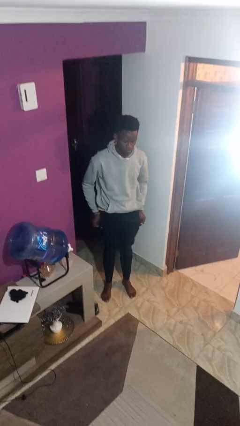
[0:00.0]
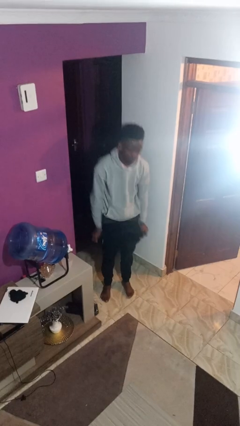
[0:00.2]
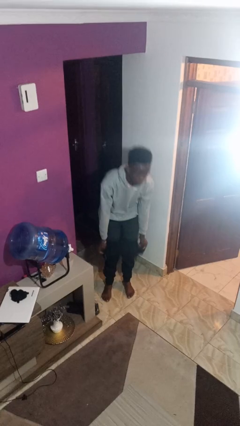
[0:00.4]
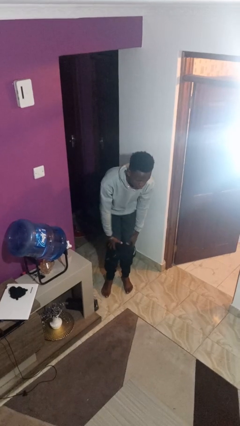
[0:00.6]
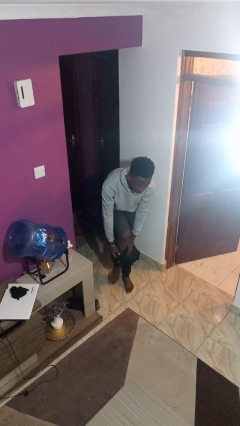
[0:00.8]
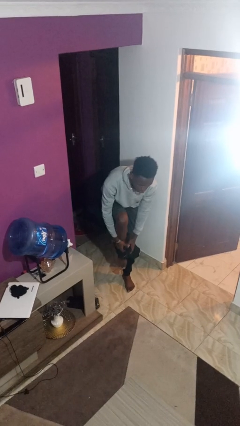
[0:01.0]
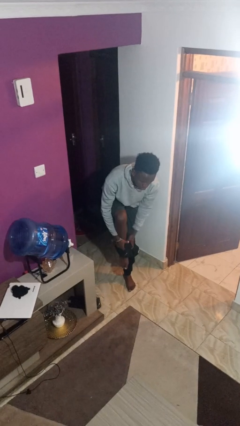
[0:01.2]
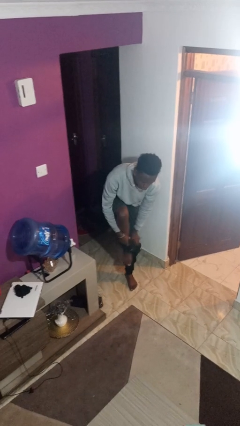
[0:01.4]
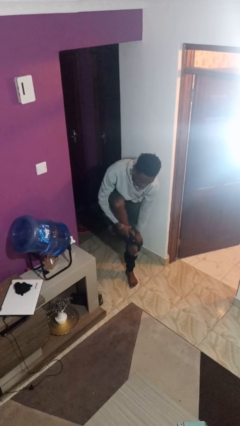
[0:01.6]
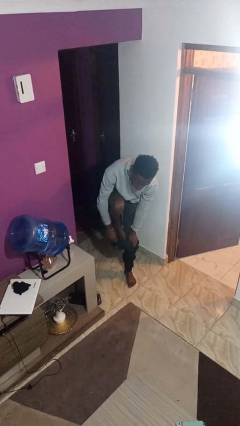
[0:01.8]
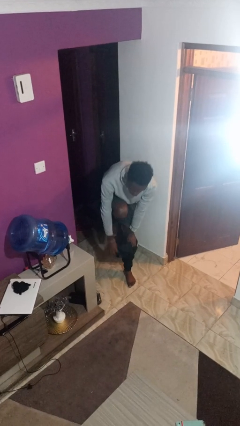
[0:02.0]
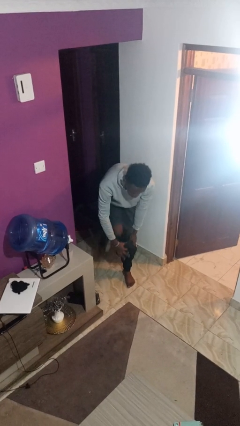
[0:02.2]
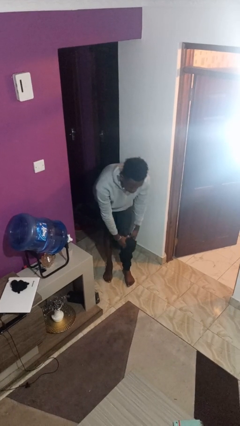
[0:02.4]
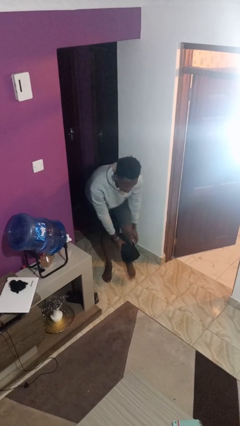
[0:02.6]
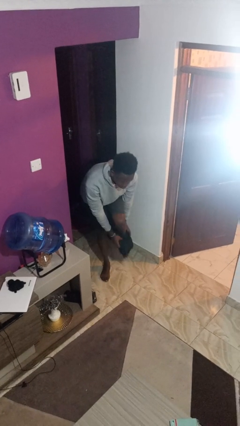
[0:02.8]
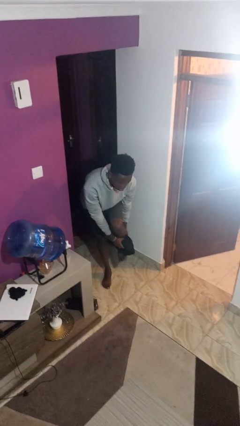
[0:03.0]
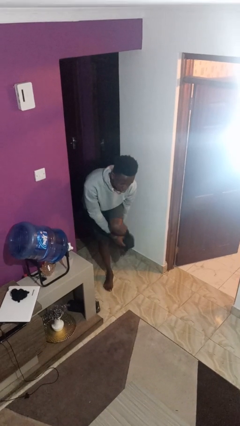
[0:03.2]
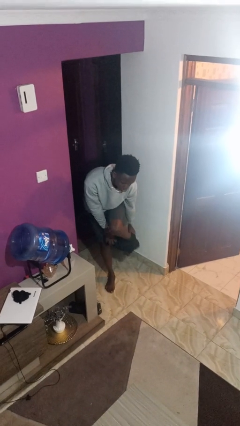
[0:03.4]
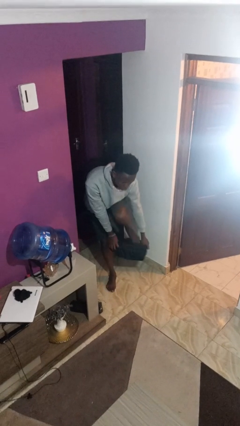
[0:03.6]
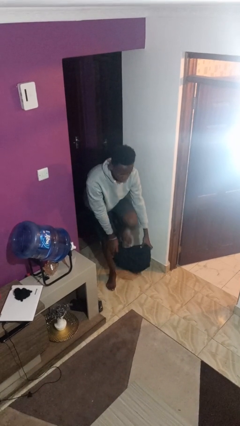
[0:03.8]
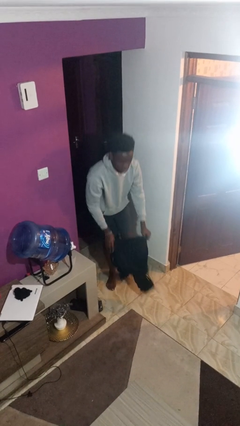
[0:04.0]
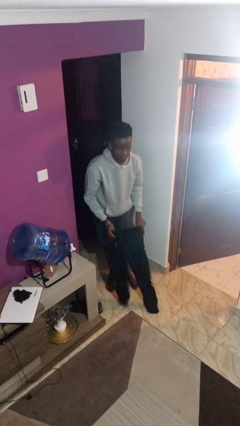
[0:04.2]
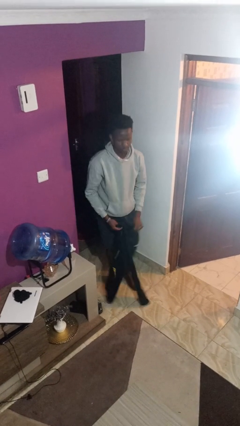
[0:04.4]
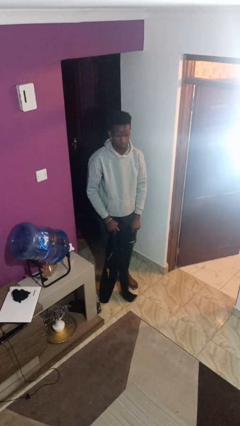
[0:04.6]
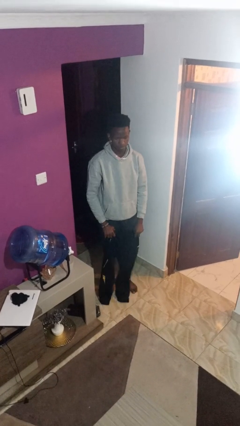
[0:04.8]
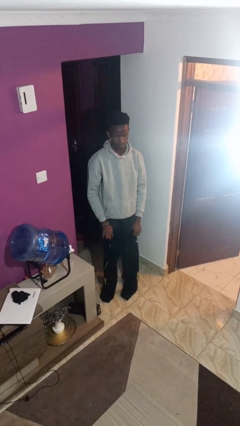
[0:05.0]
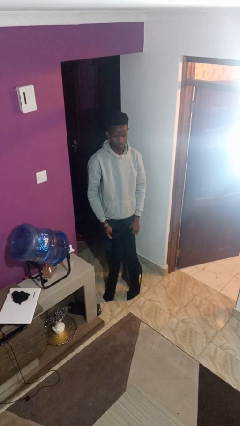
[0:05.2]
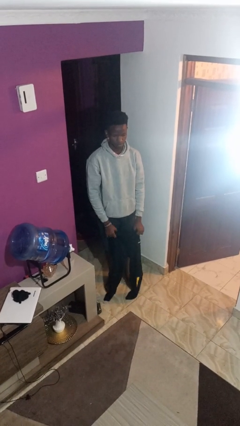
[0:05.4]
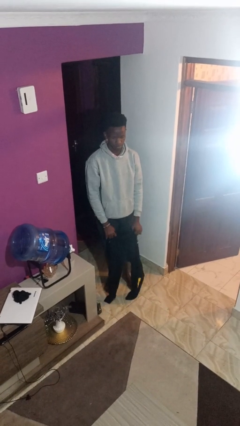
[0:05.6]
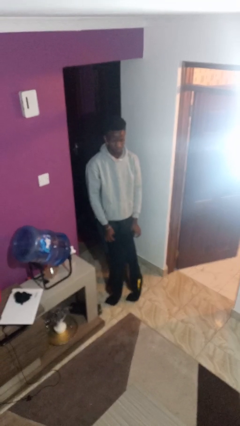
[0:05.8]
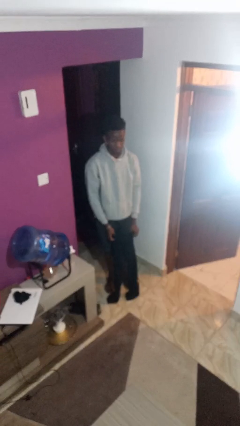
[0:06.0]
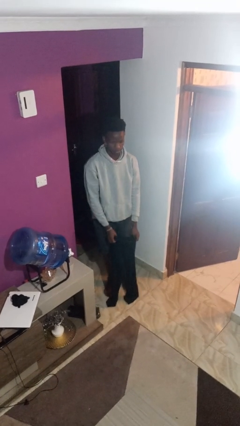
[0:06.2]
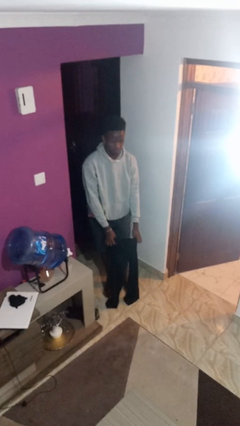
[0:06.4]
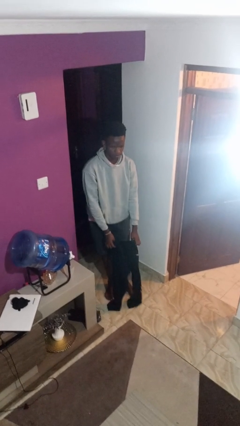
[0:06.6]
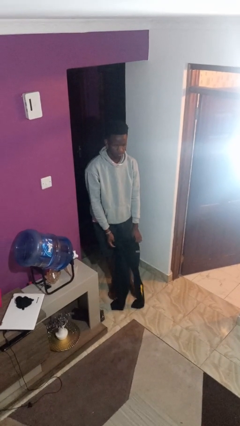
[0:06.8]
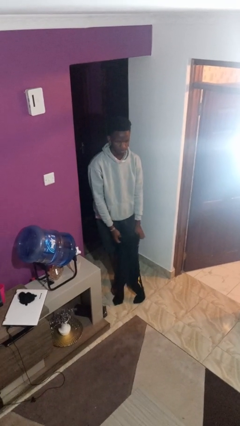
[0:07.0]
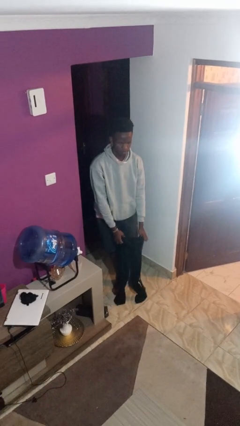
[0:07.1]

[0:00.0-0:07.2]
person takes off pants

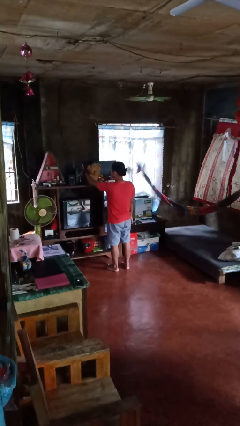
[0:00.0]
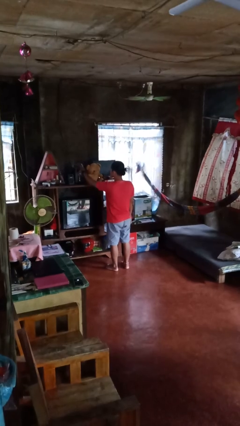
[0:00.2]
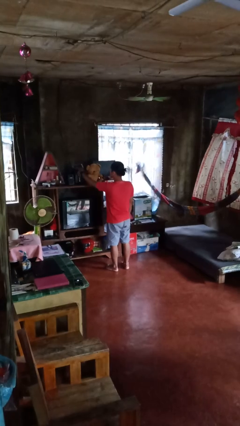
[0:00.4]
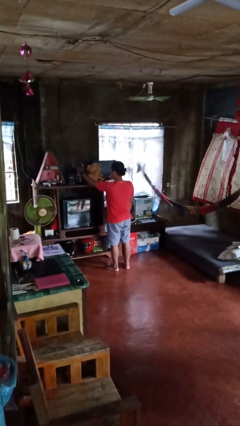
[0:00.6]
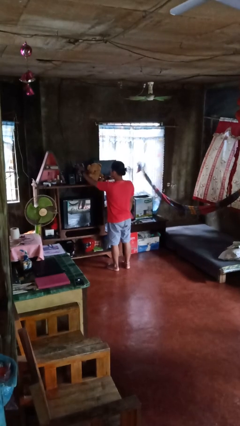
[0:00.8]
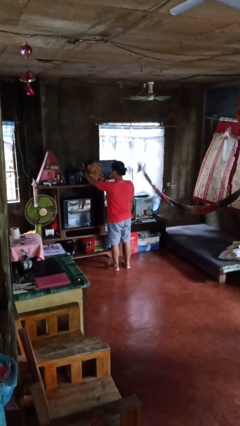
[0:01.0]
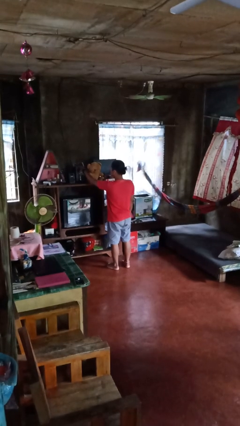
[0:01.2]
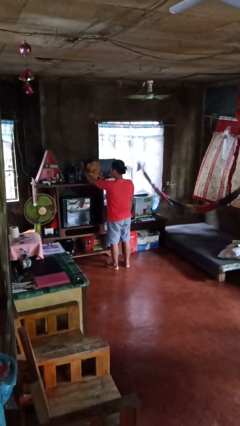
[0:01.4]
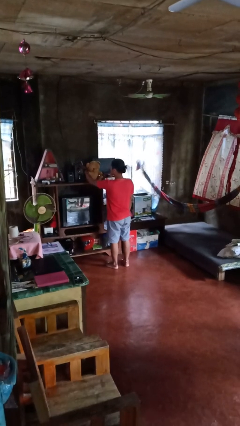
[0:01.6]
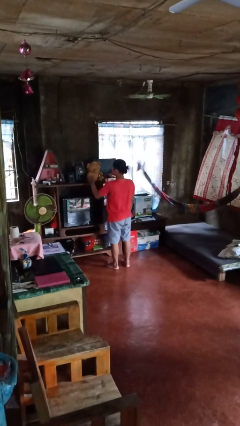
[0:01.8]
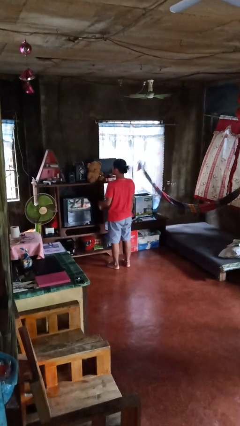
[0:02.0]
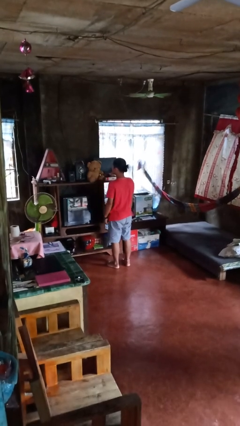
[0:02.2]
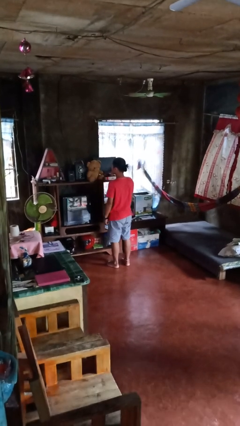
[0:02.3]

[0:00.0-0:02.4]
person taps object with finger

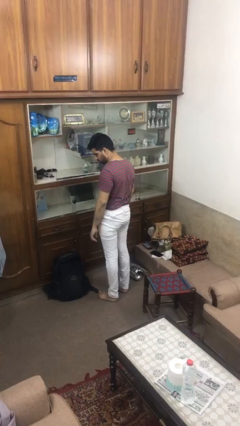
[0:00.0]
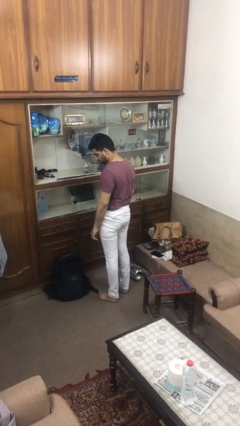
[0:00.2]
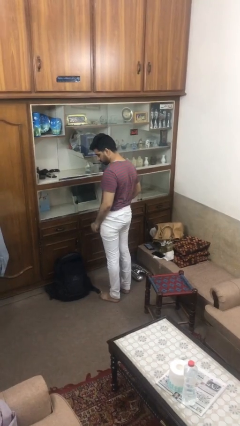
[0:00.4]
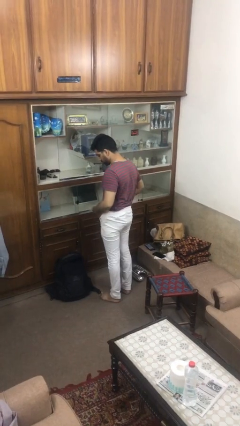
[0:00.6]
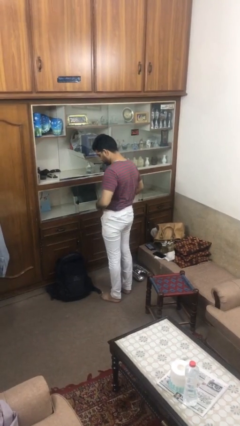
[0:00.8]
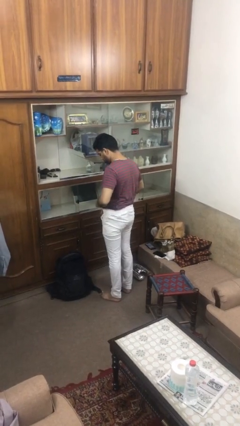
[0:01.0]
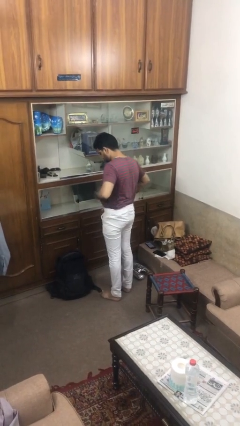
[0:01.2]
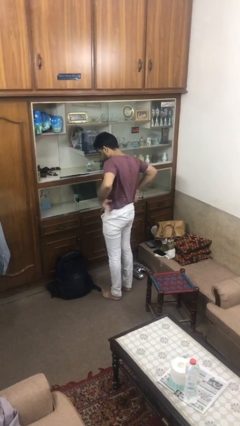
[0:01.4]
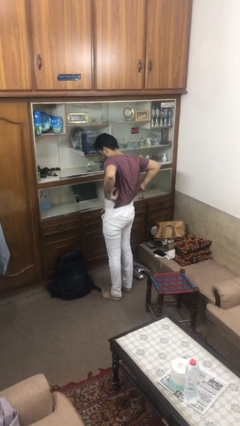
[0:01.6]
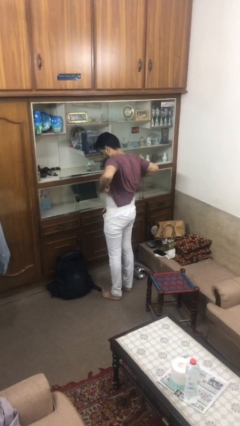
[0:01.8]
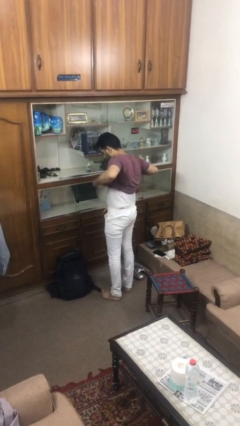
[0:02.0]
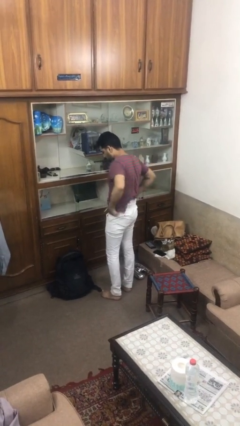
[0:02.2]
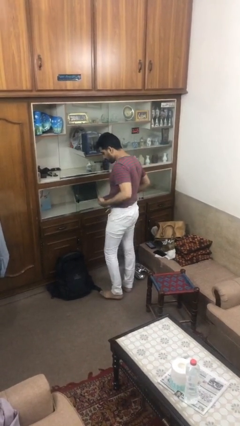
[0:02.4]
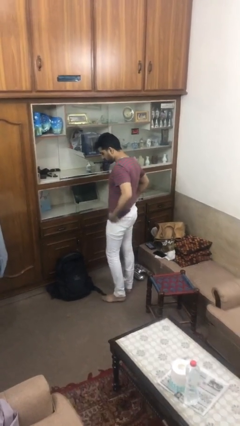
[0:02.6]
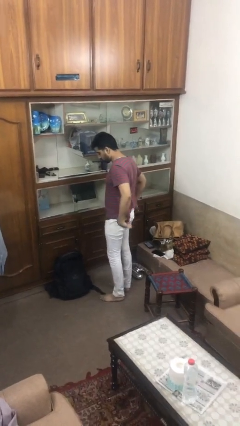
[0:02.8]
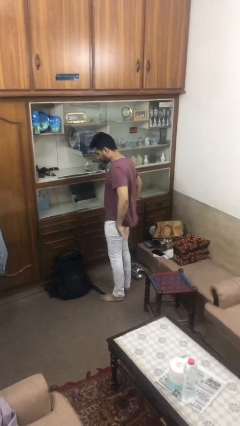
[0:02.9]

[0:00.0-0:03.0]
person untucks shirt

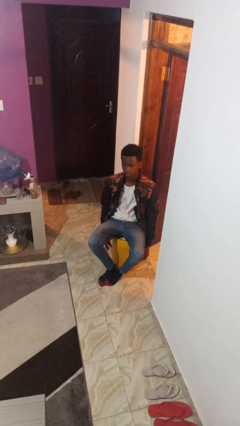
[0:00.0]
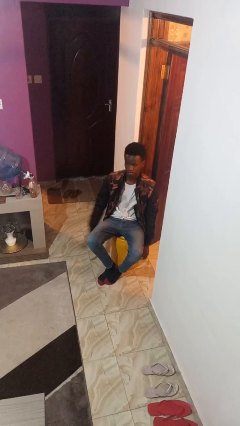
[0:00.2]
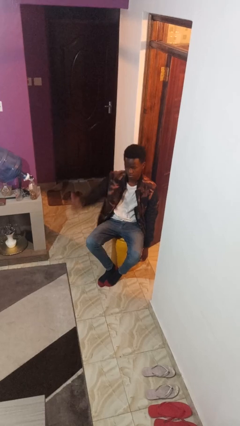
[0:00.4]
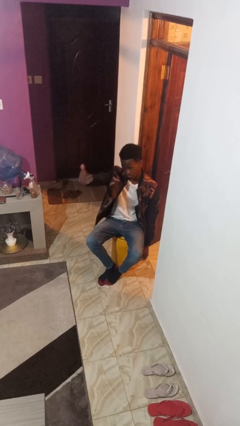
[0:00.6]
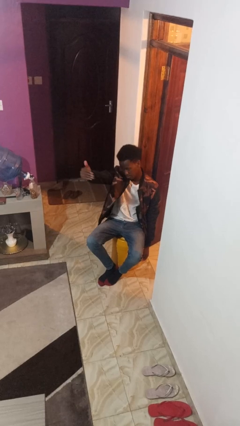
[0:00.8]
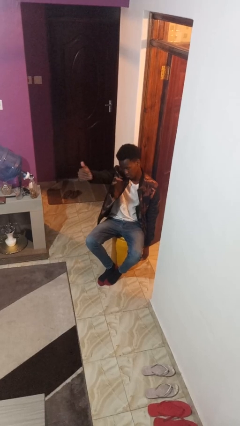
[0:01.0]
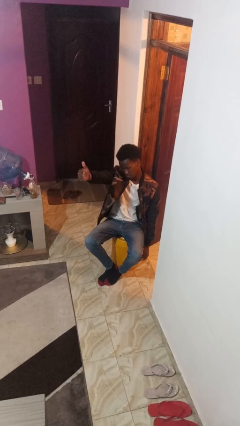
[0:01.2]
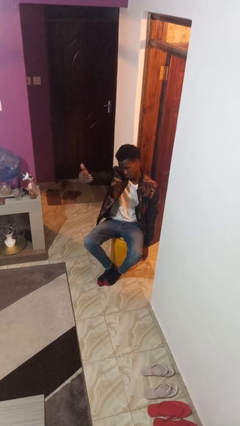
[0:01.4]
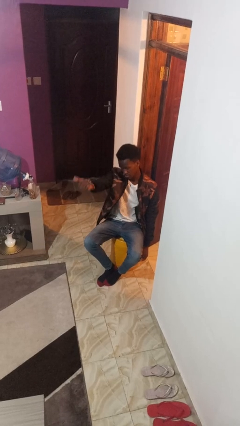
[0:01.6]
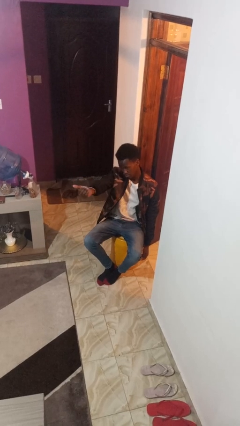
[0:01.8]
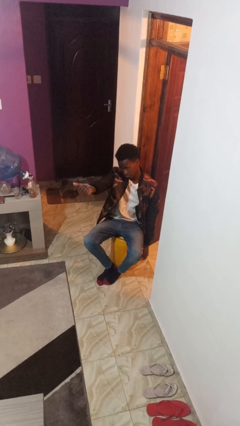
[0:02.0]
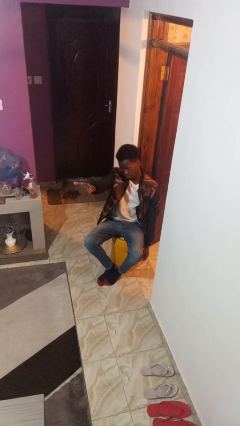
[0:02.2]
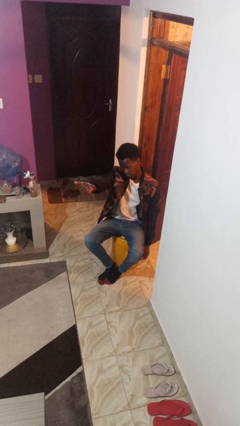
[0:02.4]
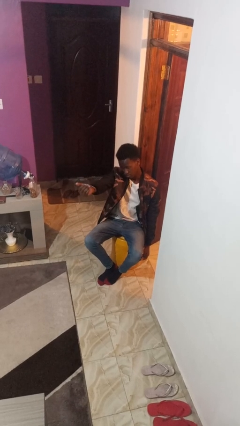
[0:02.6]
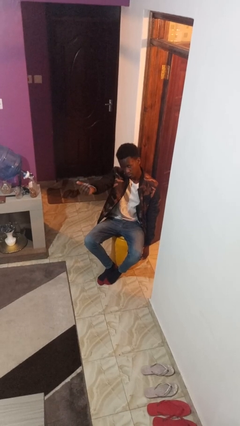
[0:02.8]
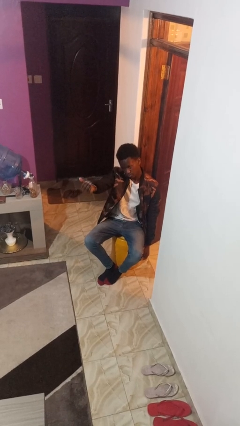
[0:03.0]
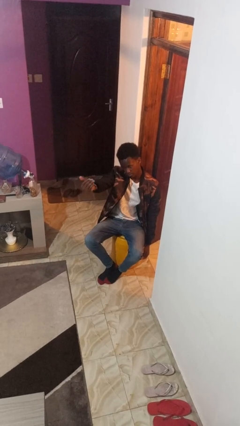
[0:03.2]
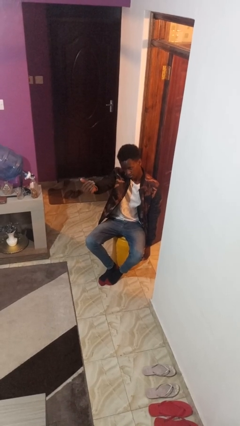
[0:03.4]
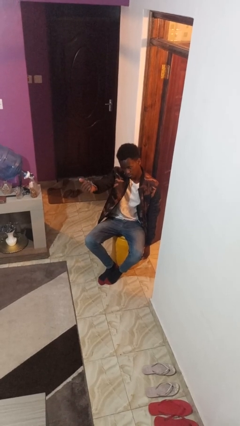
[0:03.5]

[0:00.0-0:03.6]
person gestures come here

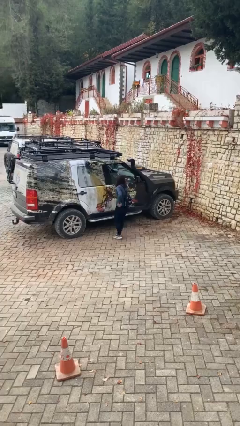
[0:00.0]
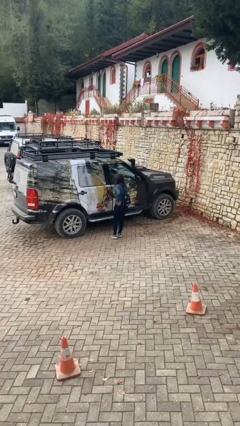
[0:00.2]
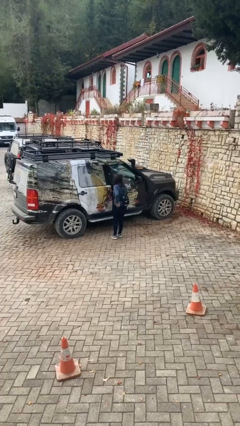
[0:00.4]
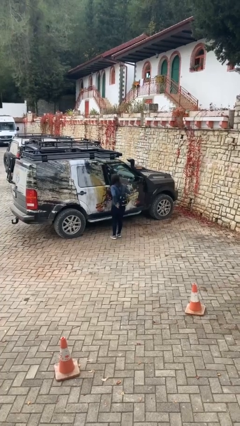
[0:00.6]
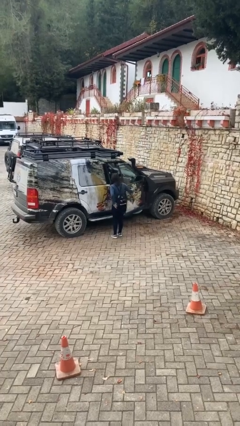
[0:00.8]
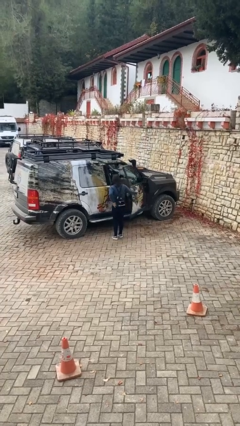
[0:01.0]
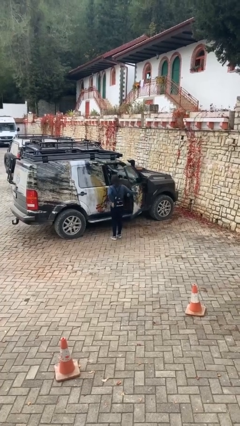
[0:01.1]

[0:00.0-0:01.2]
person opens car door
